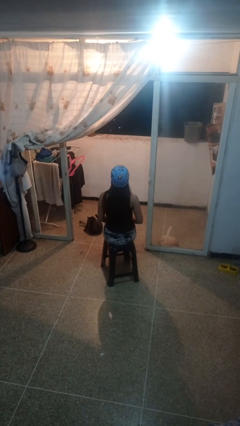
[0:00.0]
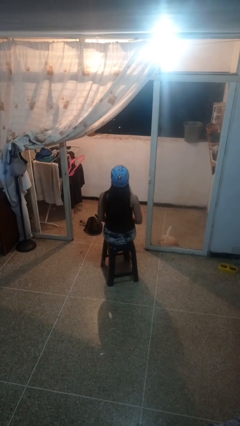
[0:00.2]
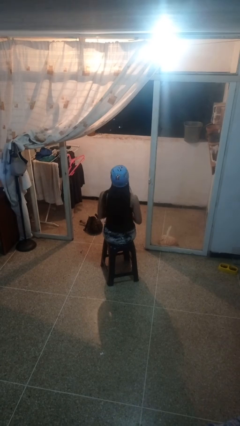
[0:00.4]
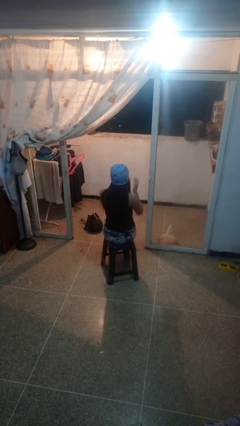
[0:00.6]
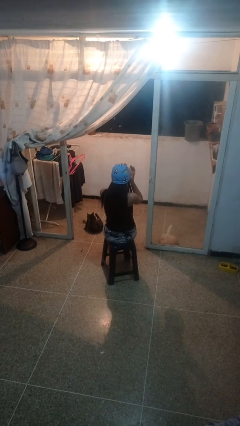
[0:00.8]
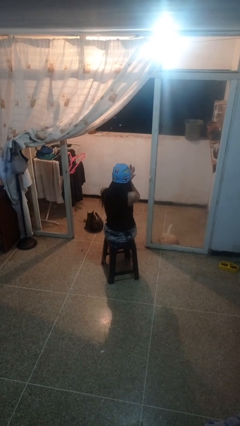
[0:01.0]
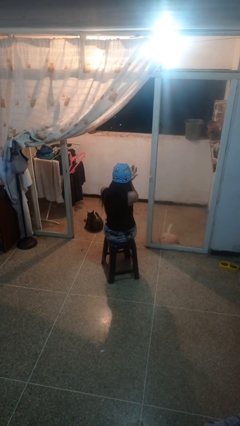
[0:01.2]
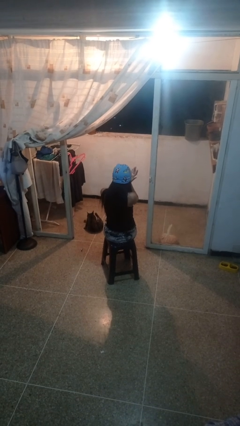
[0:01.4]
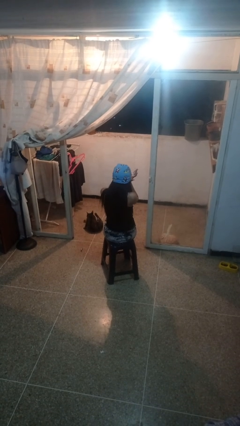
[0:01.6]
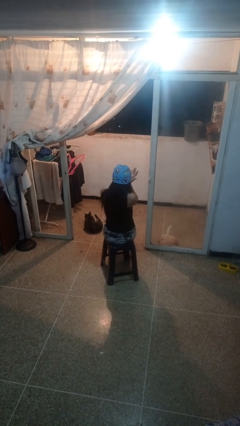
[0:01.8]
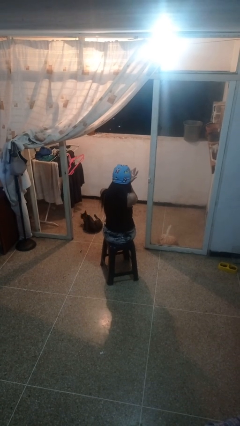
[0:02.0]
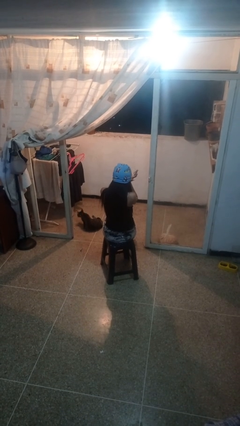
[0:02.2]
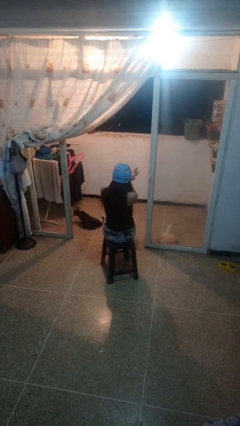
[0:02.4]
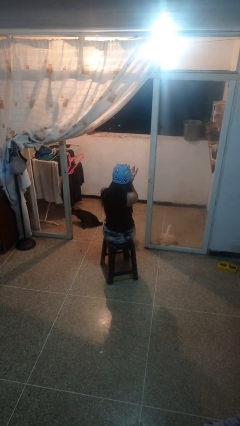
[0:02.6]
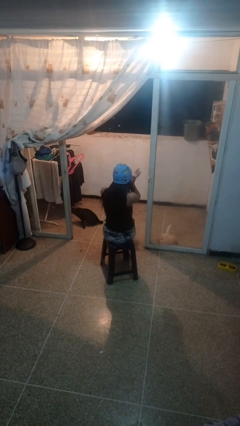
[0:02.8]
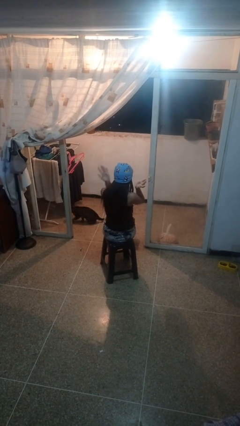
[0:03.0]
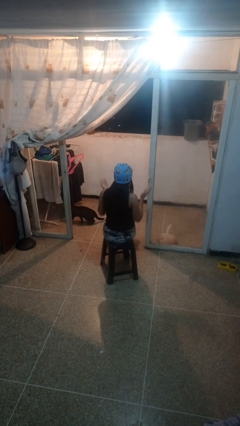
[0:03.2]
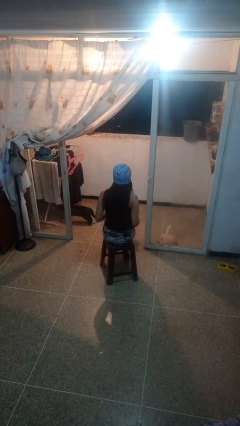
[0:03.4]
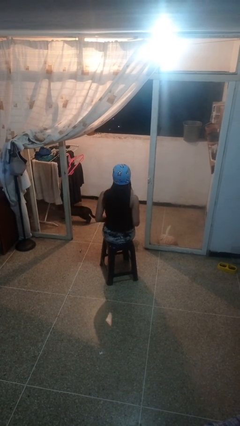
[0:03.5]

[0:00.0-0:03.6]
person rubs eyes

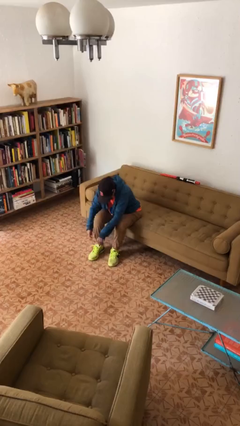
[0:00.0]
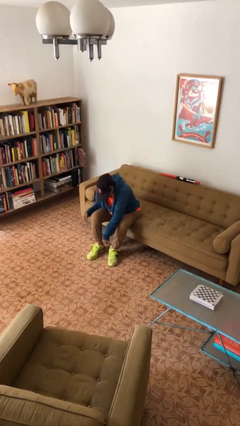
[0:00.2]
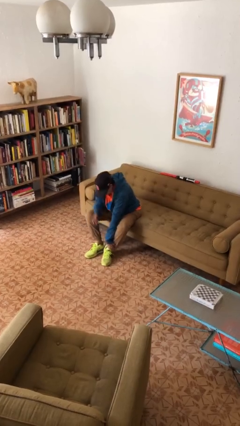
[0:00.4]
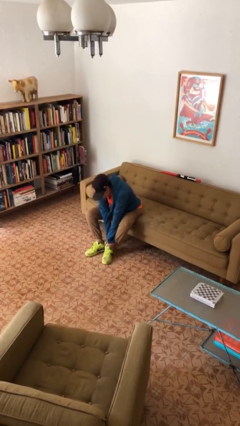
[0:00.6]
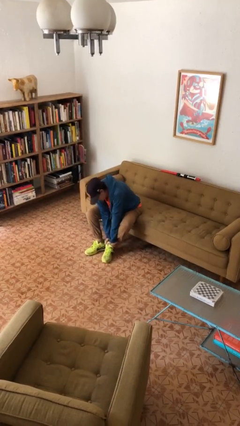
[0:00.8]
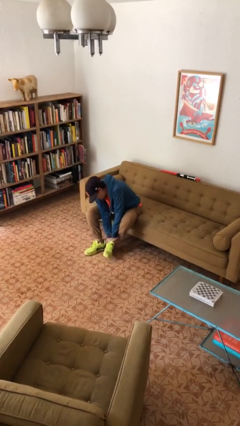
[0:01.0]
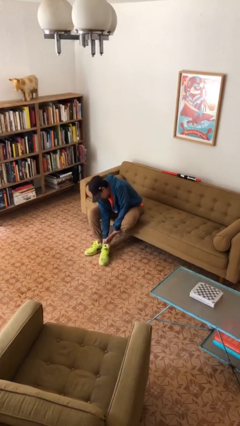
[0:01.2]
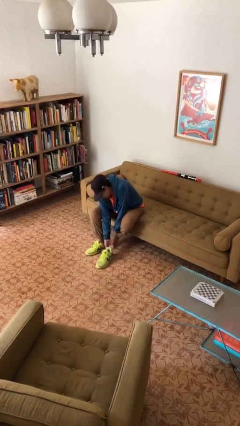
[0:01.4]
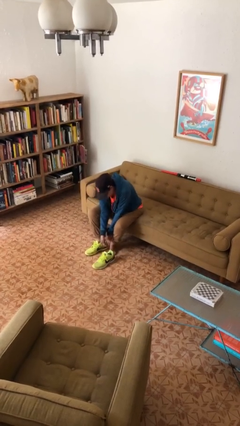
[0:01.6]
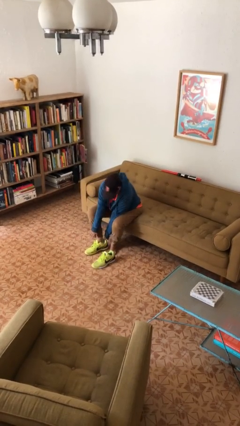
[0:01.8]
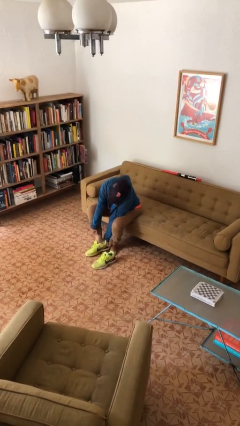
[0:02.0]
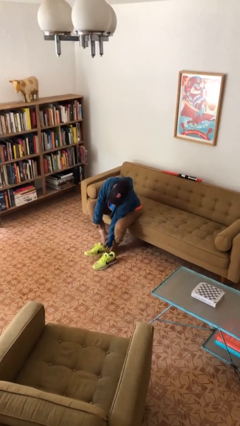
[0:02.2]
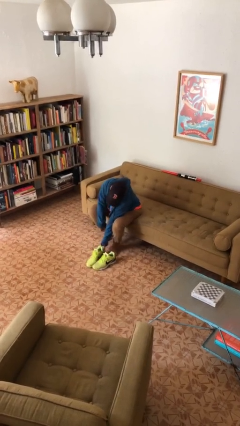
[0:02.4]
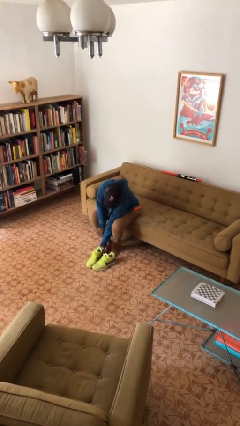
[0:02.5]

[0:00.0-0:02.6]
person takes off shoes

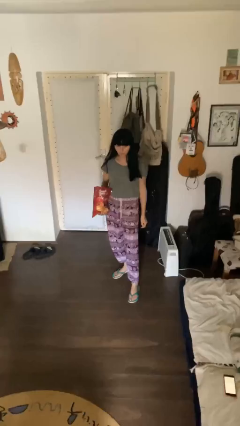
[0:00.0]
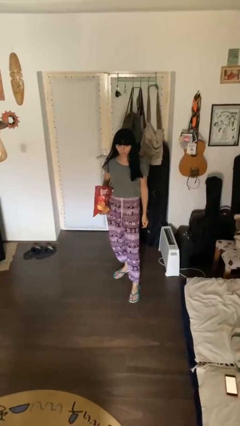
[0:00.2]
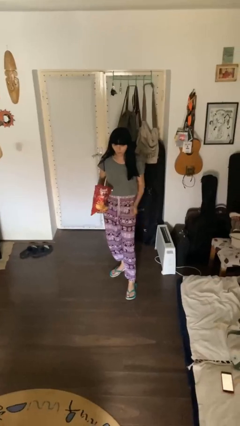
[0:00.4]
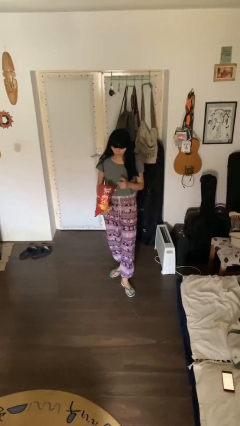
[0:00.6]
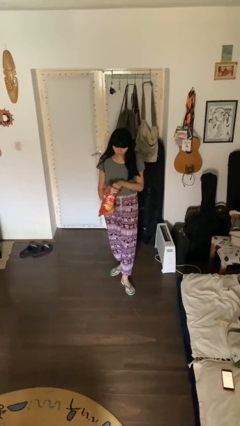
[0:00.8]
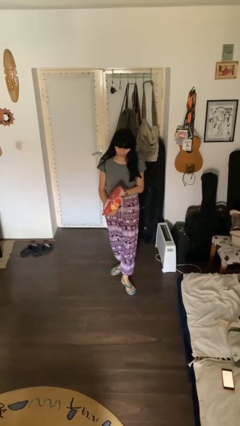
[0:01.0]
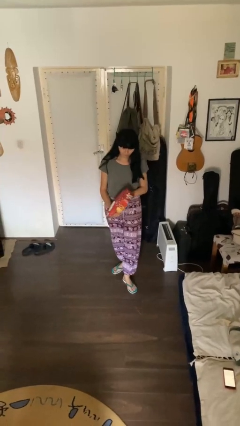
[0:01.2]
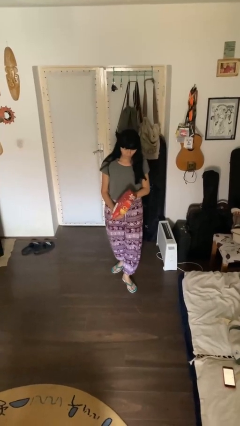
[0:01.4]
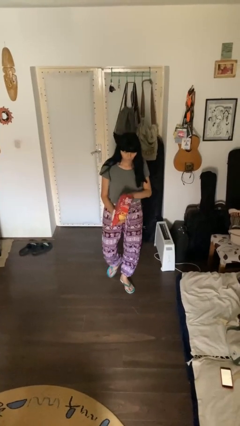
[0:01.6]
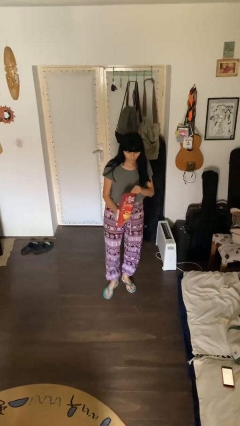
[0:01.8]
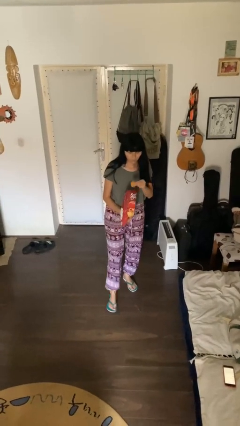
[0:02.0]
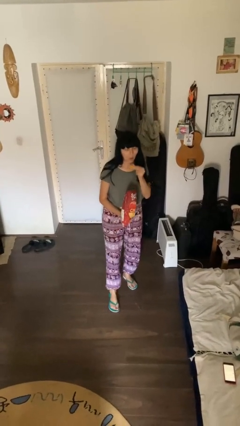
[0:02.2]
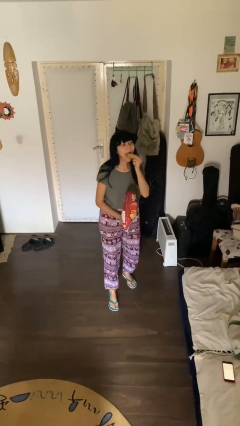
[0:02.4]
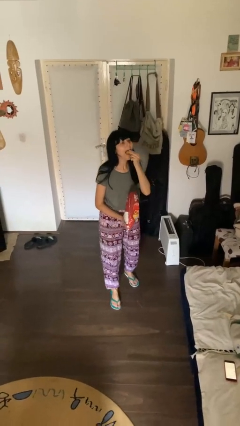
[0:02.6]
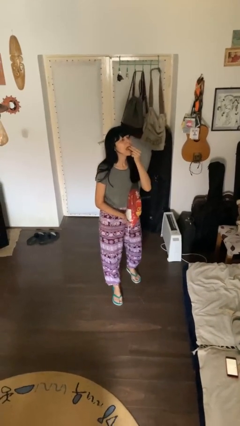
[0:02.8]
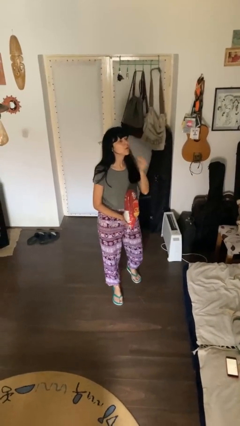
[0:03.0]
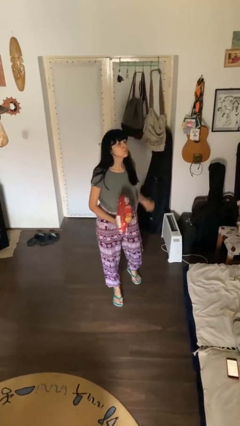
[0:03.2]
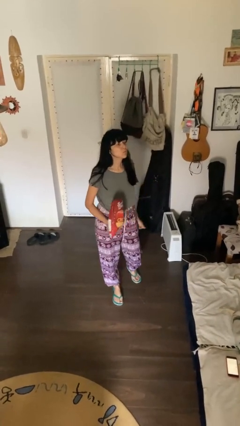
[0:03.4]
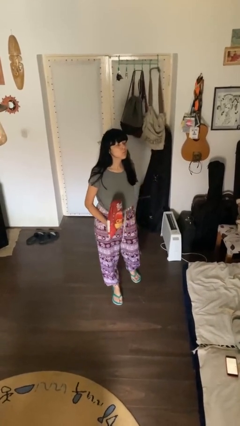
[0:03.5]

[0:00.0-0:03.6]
person eats snack from bag

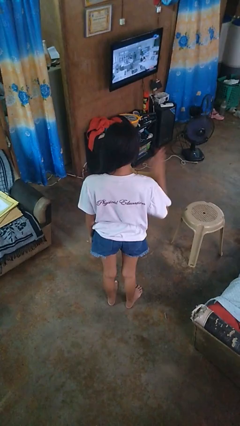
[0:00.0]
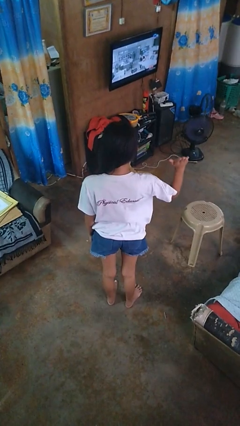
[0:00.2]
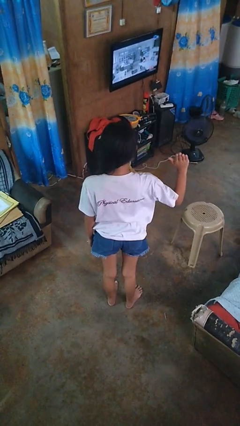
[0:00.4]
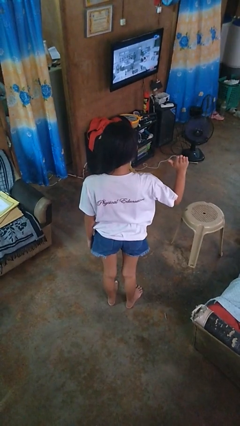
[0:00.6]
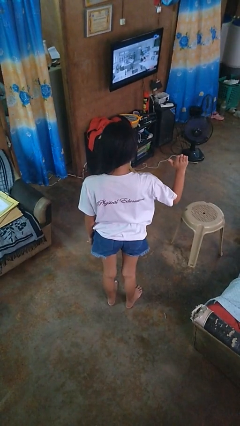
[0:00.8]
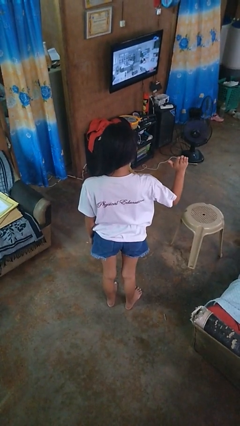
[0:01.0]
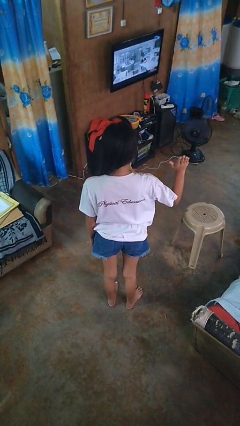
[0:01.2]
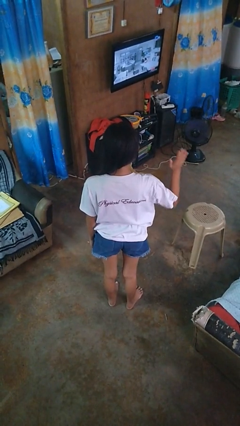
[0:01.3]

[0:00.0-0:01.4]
person gestures number five

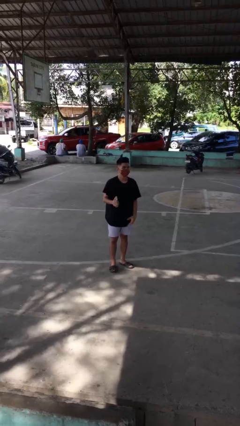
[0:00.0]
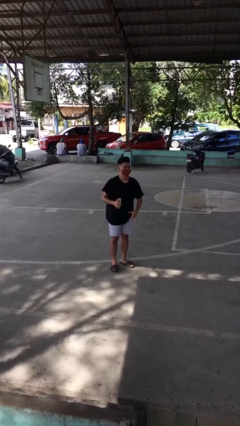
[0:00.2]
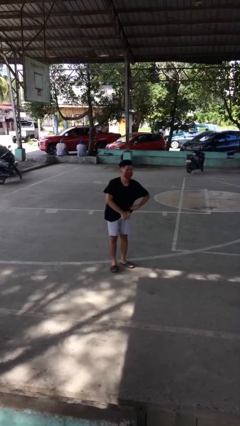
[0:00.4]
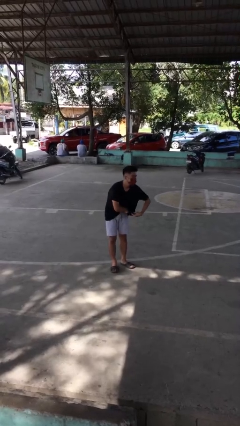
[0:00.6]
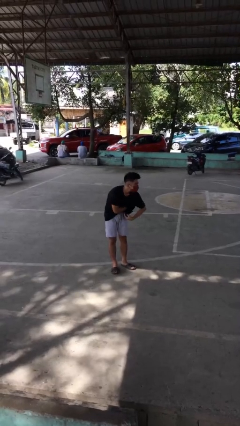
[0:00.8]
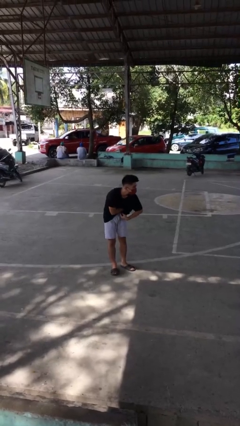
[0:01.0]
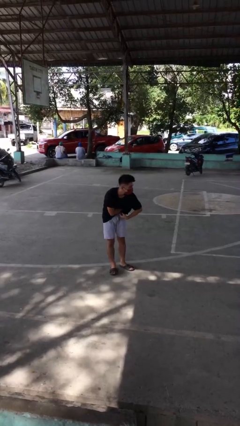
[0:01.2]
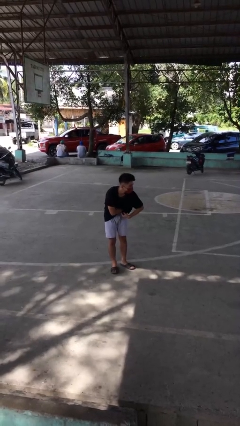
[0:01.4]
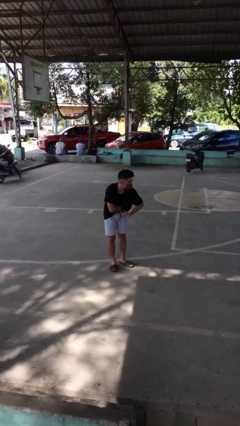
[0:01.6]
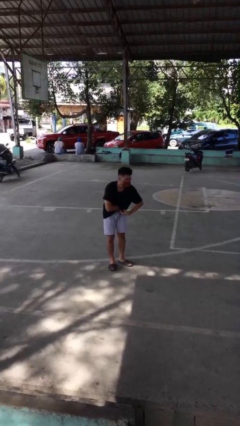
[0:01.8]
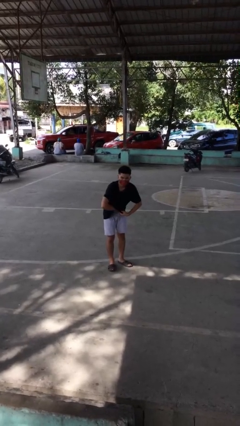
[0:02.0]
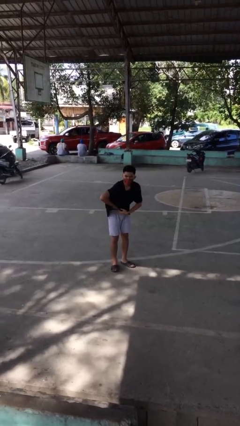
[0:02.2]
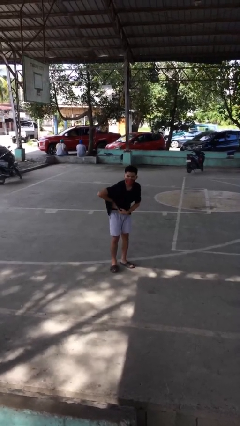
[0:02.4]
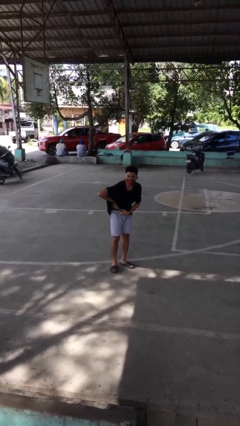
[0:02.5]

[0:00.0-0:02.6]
person applies deodorant

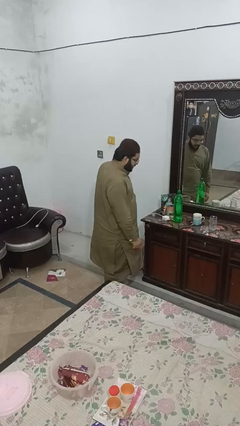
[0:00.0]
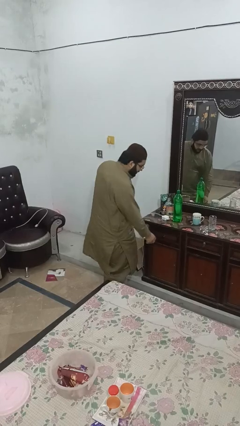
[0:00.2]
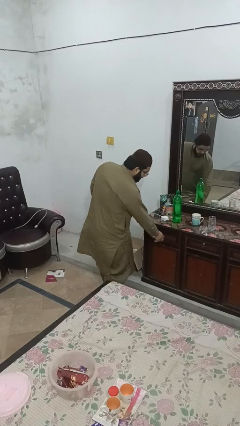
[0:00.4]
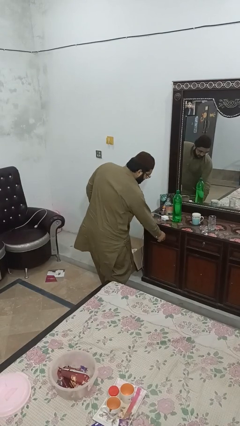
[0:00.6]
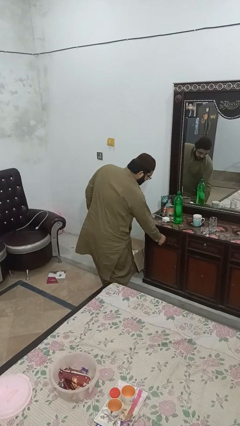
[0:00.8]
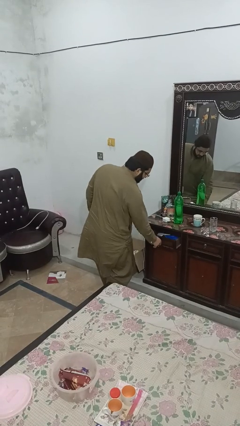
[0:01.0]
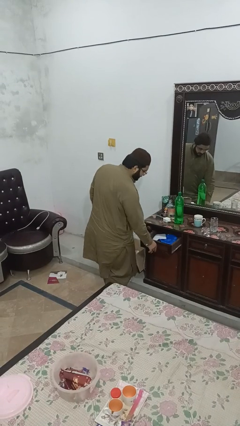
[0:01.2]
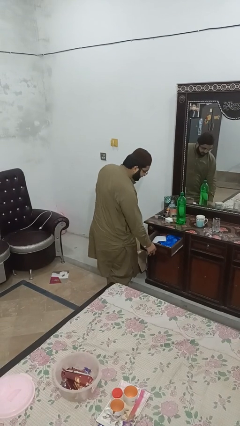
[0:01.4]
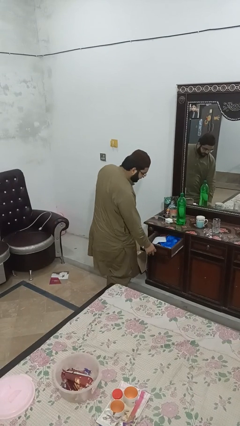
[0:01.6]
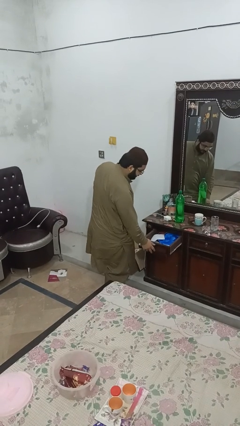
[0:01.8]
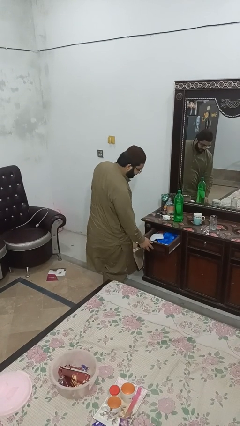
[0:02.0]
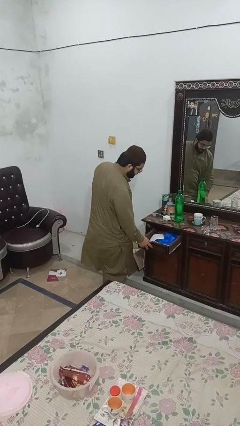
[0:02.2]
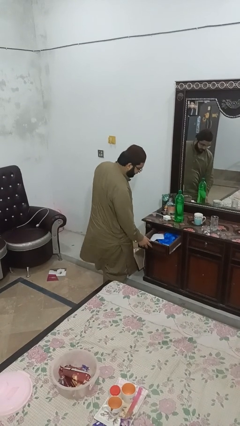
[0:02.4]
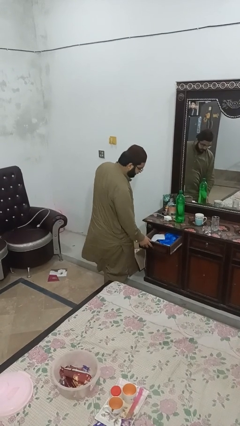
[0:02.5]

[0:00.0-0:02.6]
person opens dresser drawer

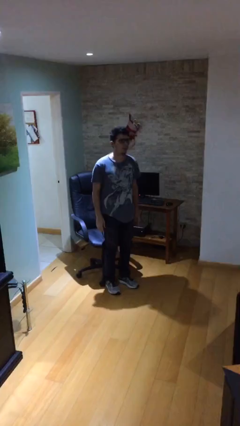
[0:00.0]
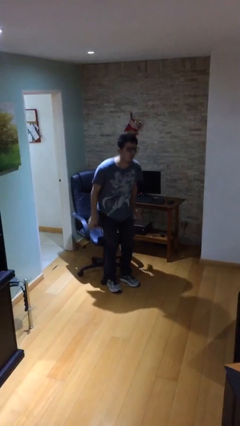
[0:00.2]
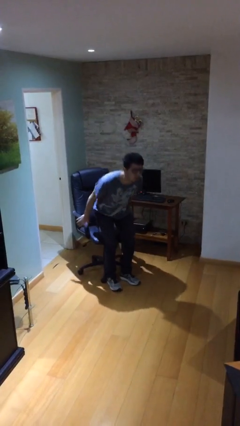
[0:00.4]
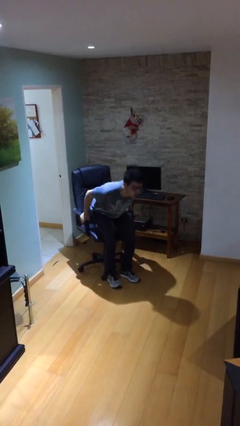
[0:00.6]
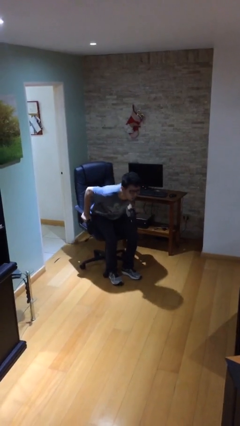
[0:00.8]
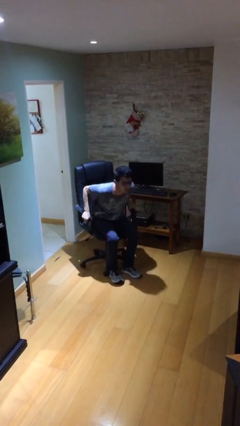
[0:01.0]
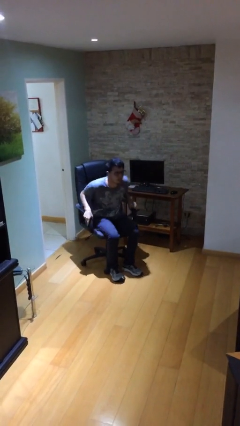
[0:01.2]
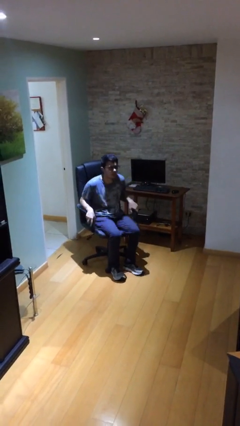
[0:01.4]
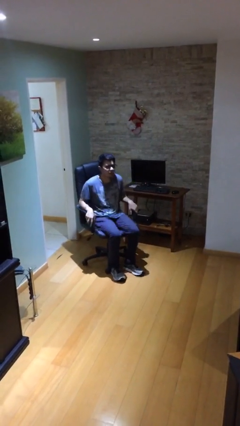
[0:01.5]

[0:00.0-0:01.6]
person sits down
